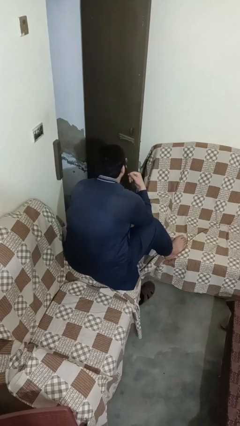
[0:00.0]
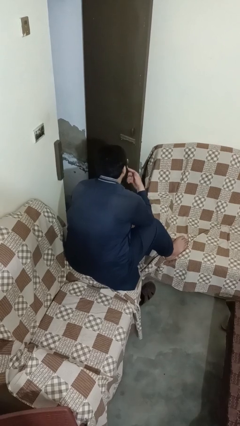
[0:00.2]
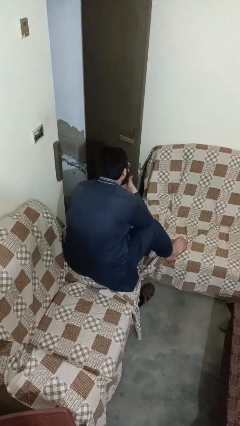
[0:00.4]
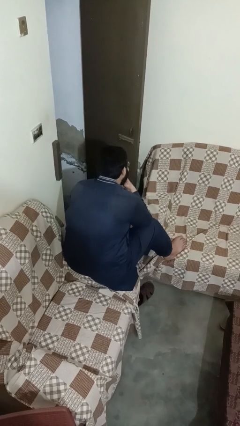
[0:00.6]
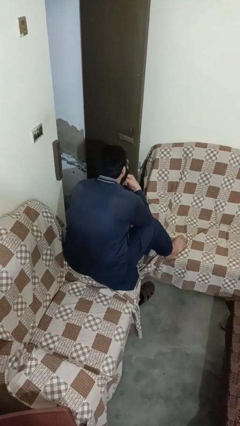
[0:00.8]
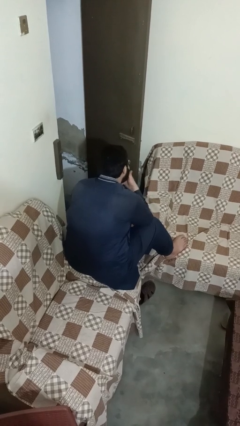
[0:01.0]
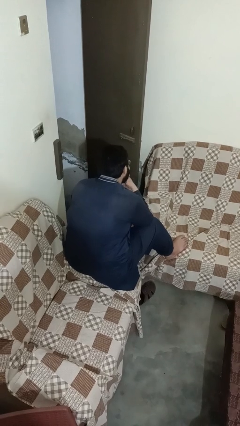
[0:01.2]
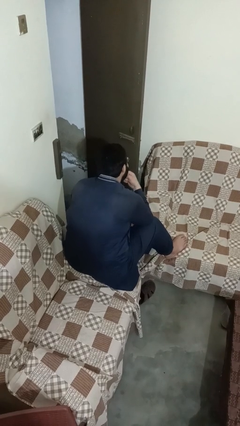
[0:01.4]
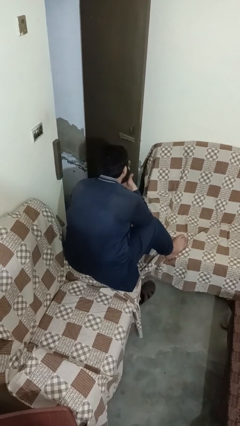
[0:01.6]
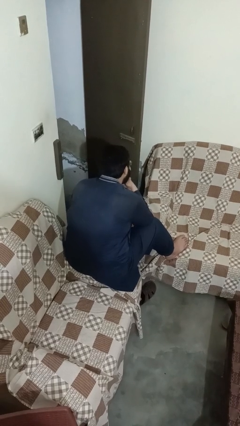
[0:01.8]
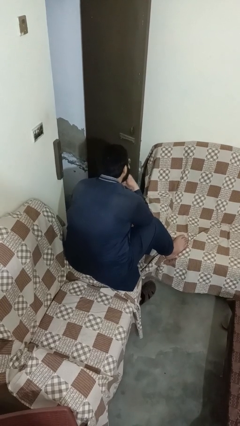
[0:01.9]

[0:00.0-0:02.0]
person strokes chin

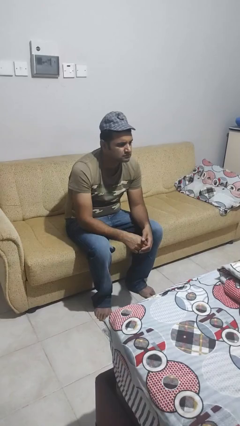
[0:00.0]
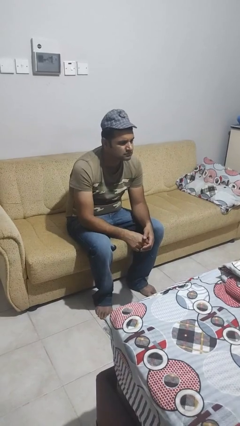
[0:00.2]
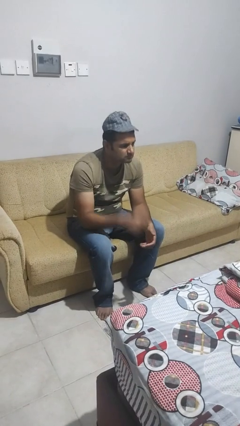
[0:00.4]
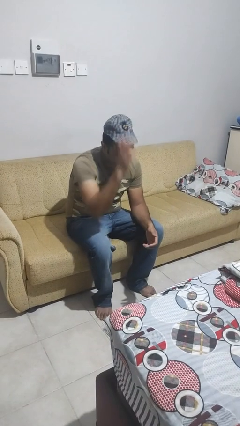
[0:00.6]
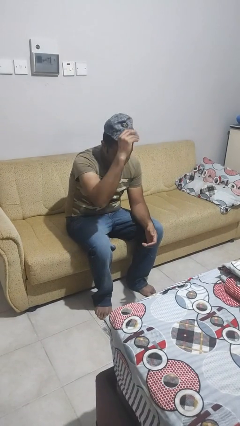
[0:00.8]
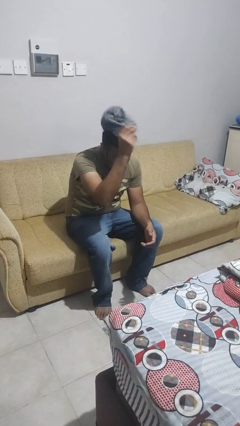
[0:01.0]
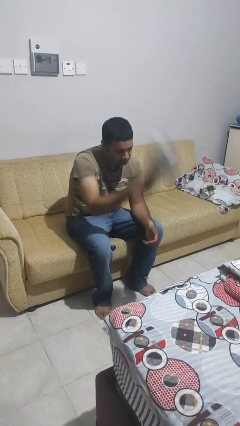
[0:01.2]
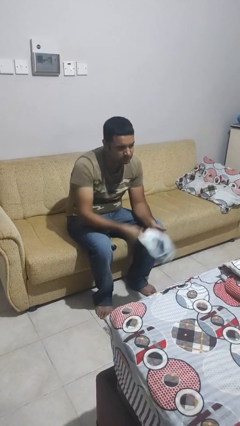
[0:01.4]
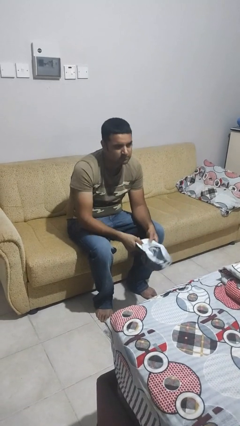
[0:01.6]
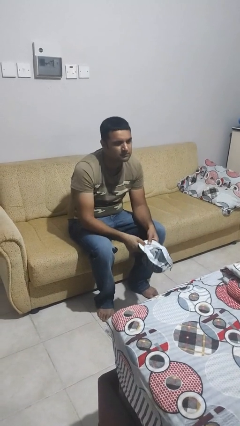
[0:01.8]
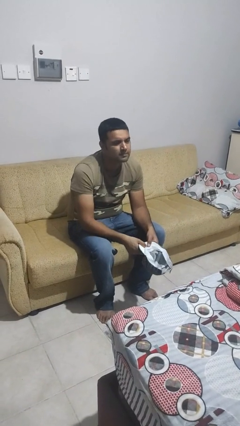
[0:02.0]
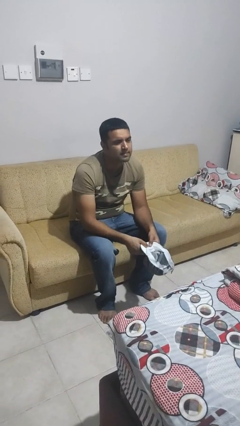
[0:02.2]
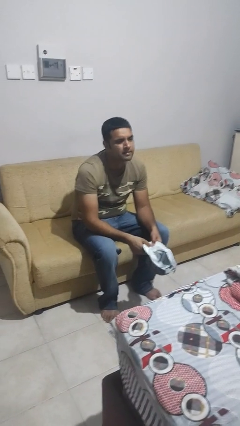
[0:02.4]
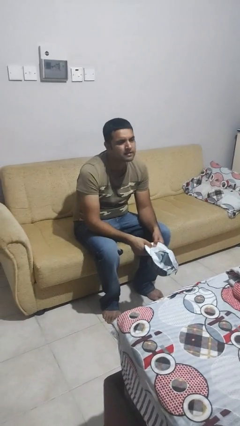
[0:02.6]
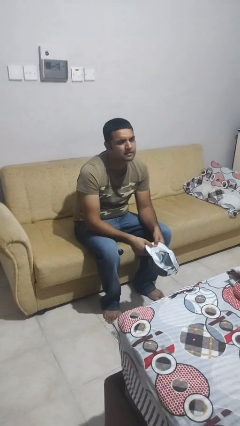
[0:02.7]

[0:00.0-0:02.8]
person takes off hat

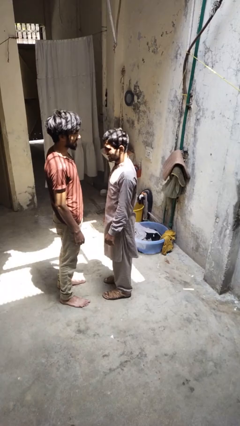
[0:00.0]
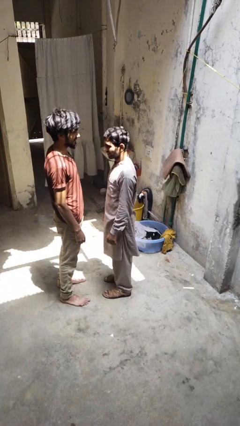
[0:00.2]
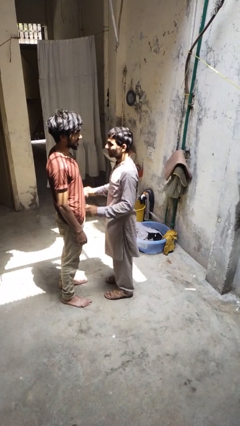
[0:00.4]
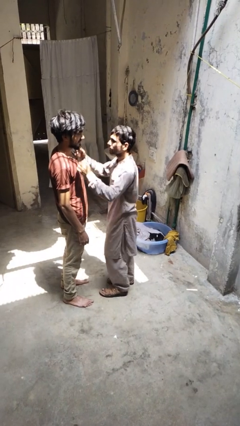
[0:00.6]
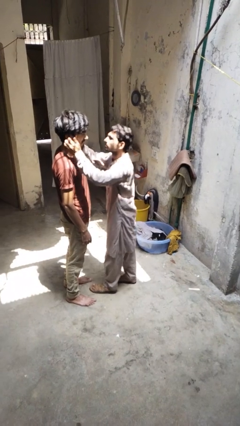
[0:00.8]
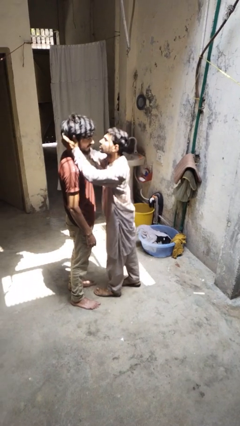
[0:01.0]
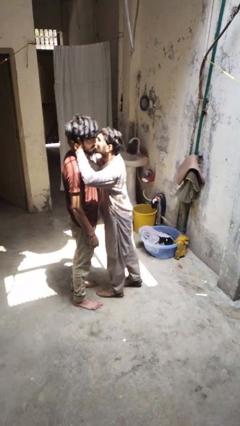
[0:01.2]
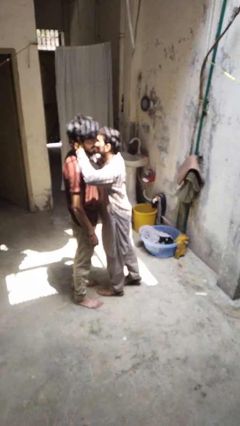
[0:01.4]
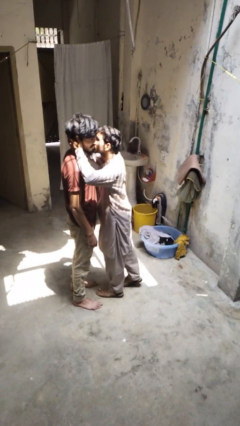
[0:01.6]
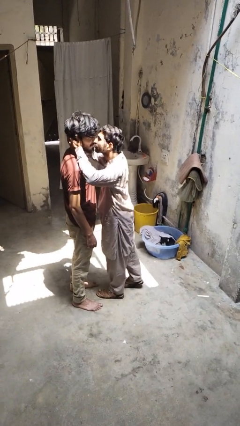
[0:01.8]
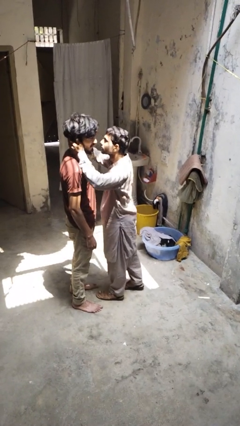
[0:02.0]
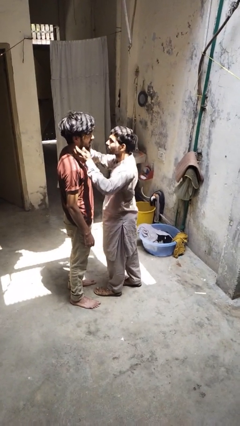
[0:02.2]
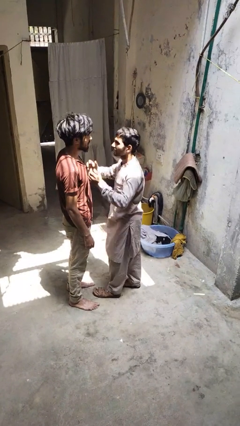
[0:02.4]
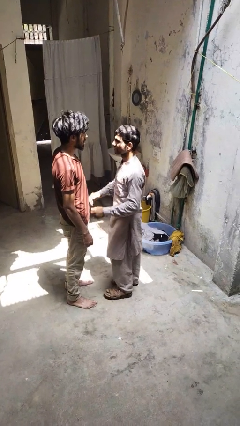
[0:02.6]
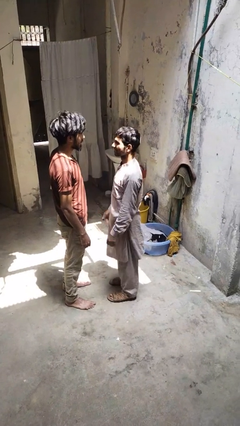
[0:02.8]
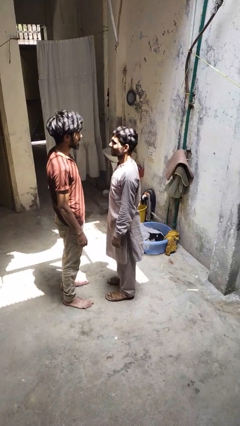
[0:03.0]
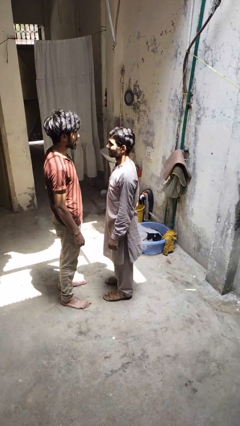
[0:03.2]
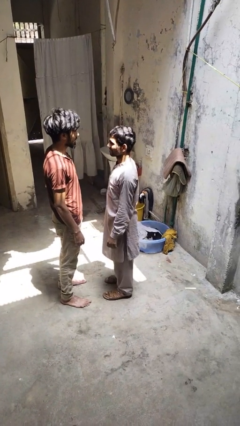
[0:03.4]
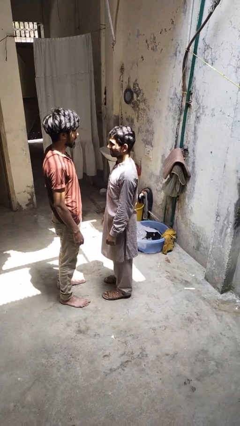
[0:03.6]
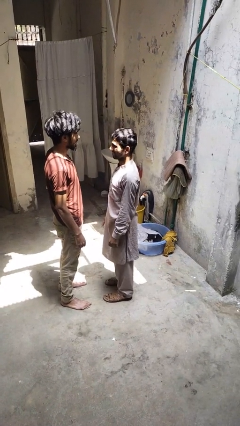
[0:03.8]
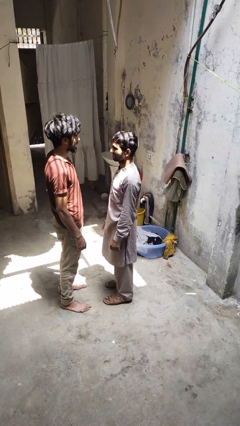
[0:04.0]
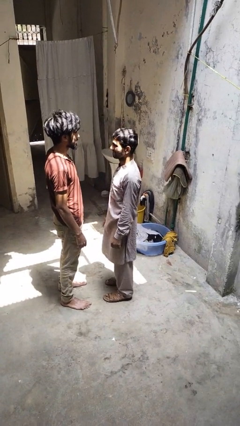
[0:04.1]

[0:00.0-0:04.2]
person kisses cheek of person

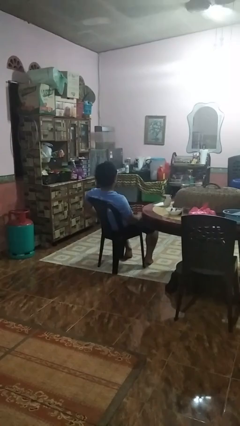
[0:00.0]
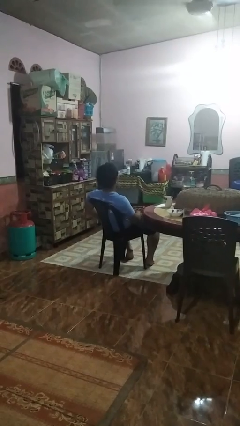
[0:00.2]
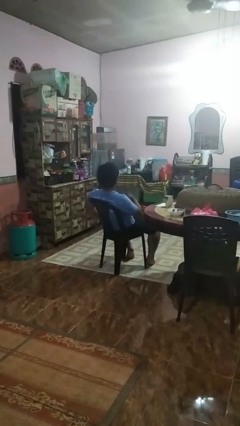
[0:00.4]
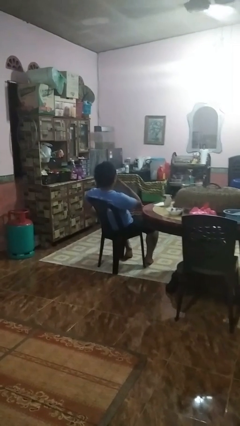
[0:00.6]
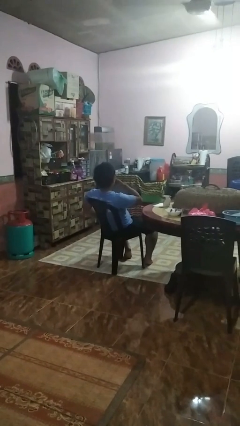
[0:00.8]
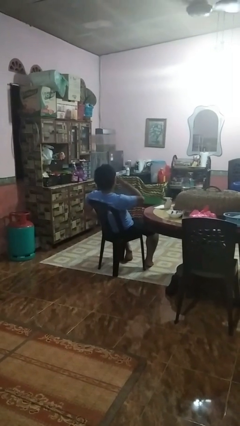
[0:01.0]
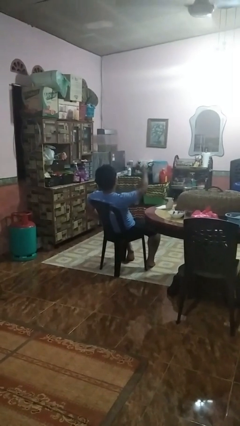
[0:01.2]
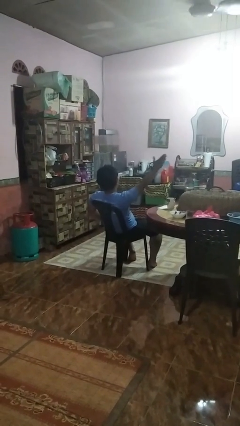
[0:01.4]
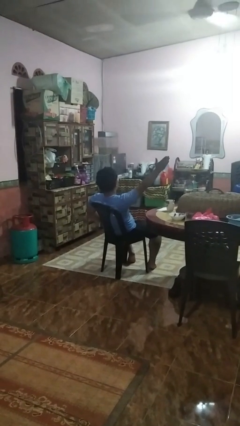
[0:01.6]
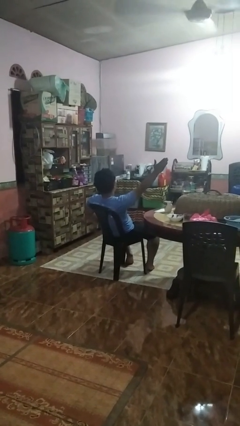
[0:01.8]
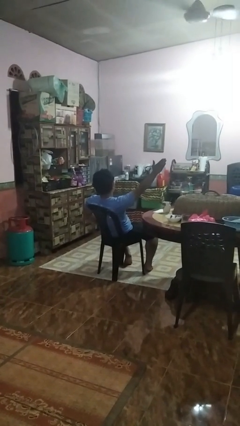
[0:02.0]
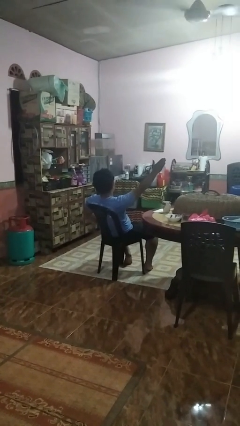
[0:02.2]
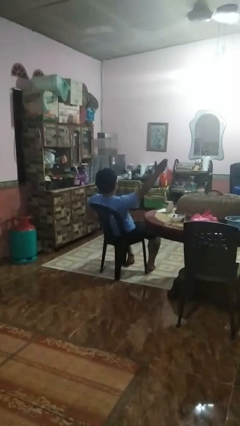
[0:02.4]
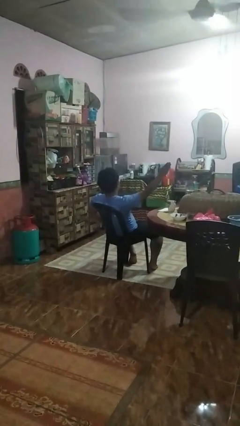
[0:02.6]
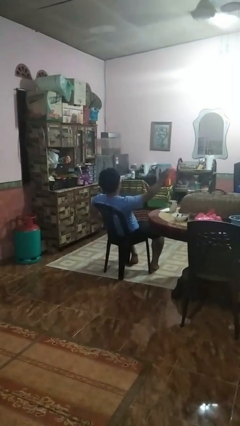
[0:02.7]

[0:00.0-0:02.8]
person gestures blow kiss

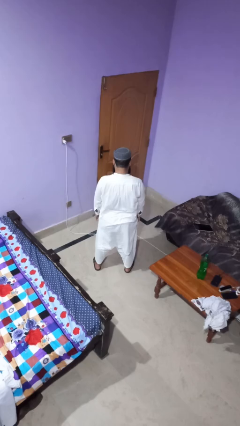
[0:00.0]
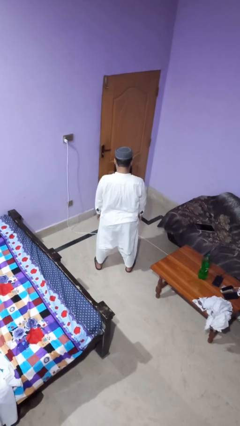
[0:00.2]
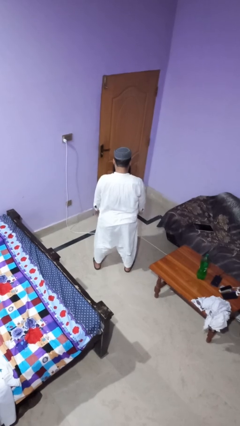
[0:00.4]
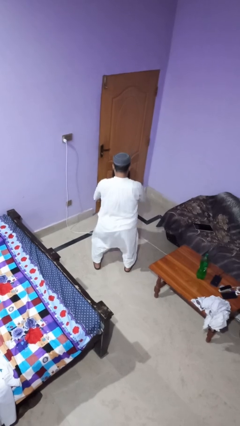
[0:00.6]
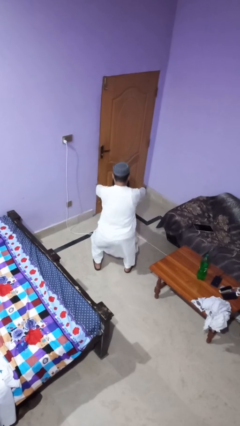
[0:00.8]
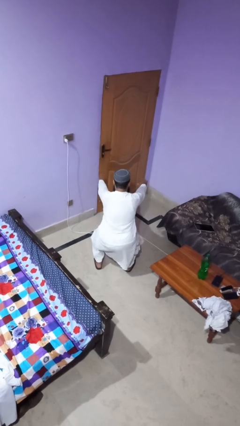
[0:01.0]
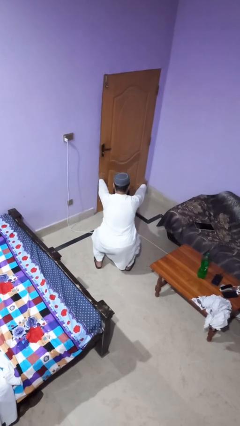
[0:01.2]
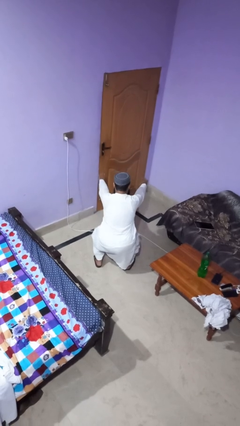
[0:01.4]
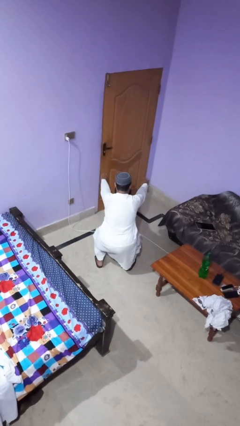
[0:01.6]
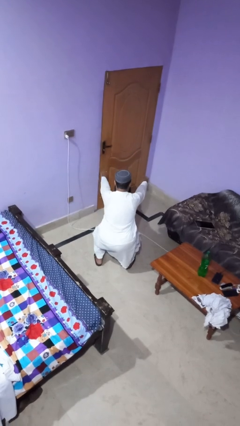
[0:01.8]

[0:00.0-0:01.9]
person squats

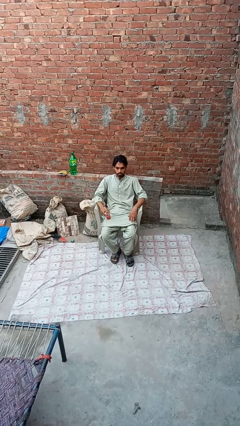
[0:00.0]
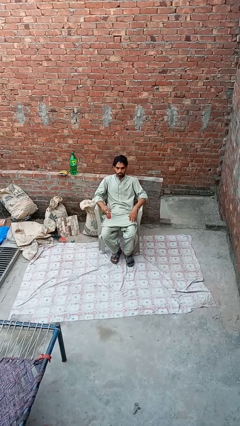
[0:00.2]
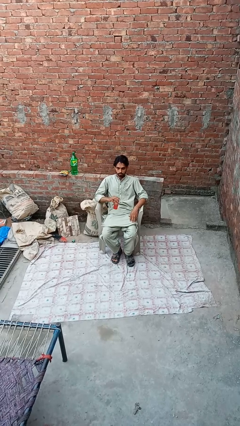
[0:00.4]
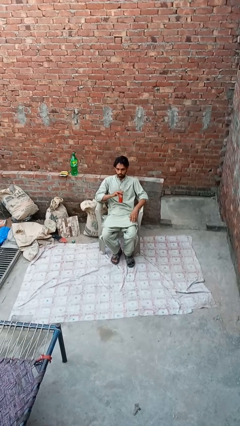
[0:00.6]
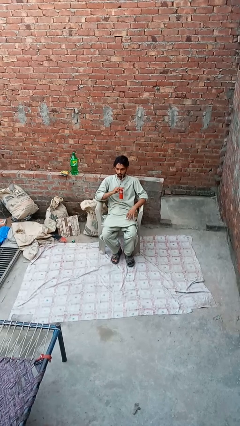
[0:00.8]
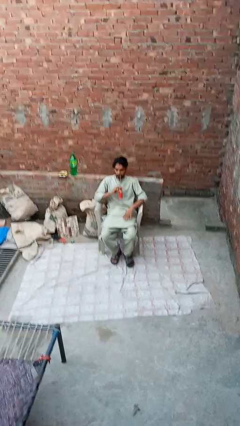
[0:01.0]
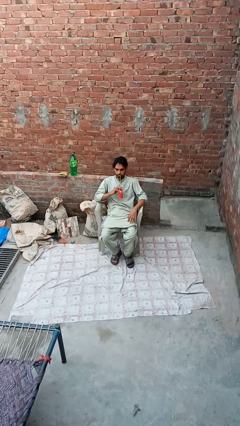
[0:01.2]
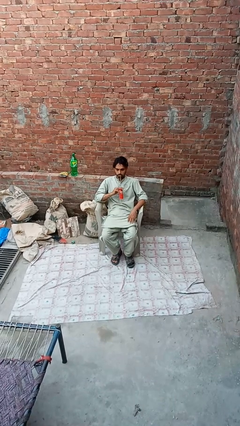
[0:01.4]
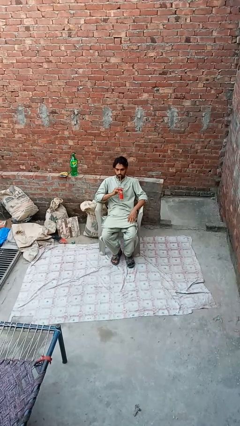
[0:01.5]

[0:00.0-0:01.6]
person drinks from straw

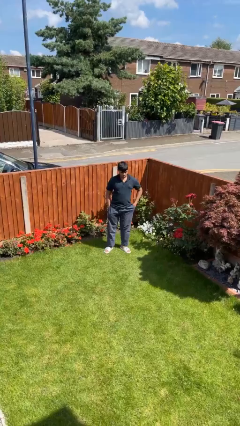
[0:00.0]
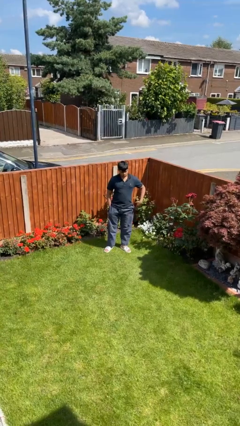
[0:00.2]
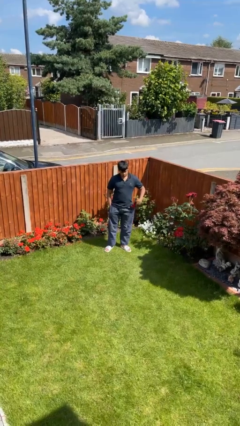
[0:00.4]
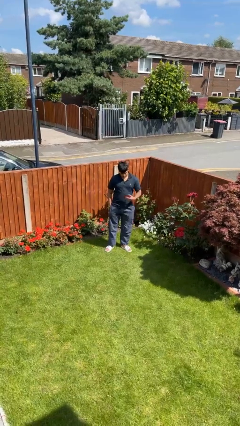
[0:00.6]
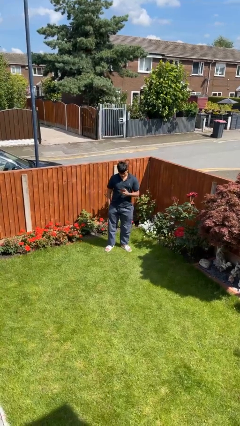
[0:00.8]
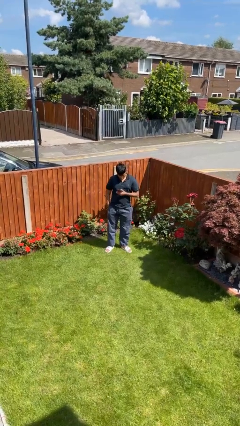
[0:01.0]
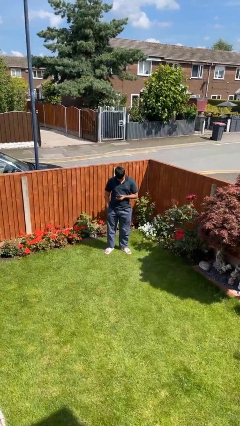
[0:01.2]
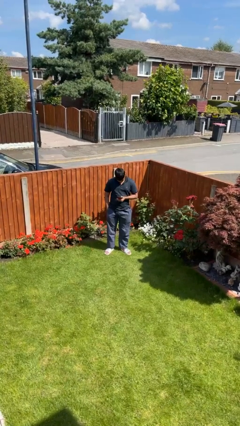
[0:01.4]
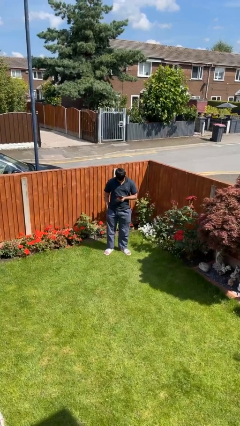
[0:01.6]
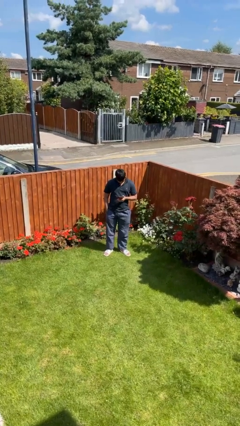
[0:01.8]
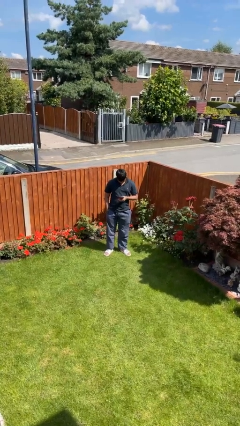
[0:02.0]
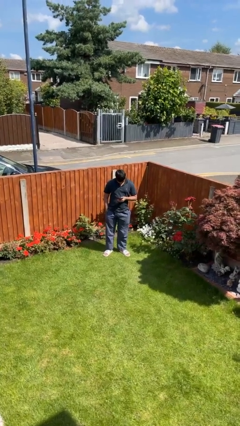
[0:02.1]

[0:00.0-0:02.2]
person takes phone from pocket
